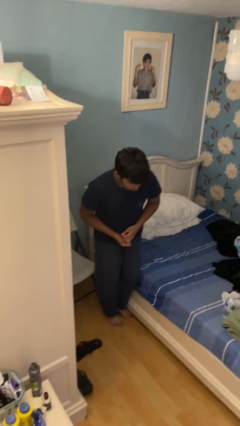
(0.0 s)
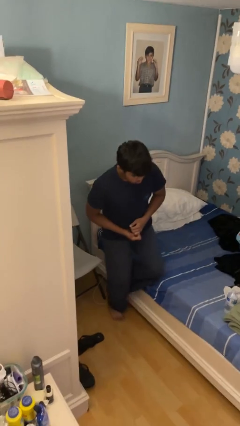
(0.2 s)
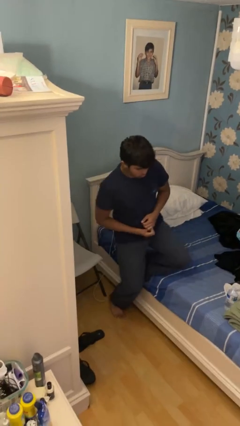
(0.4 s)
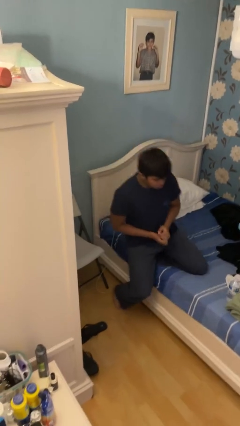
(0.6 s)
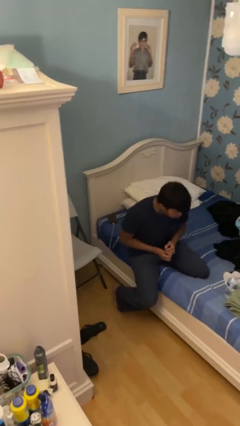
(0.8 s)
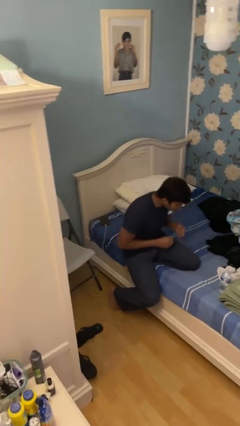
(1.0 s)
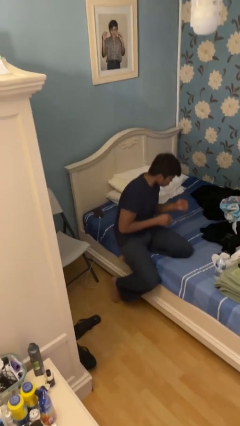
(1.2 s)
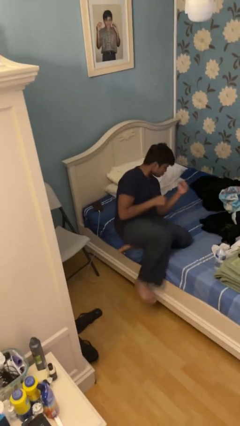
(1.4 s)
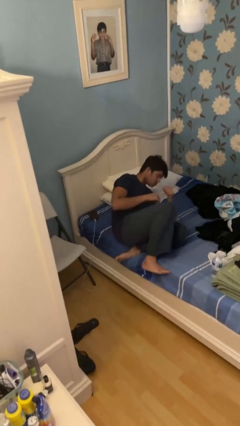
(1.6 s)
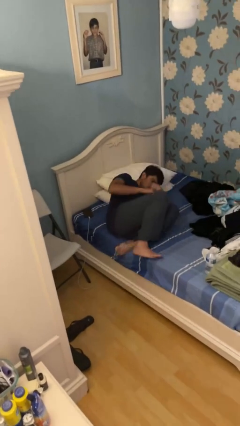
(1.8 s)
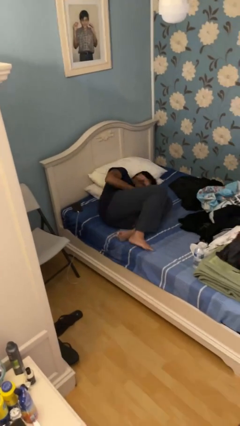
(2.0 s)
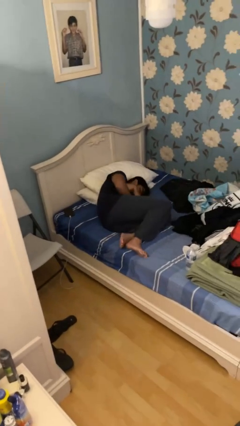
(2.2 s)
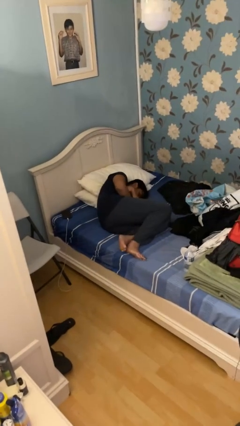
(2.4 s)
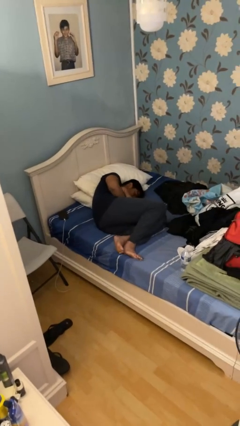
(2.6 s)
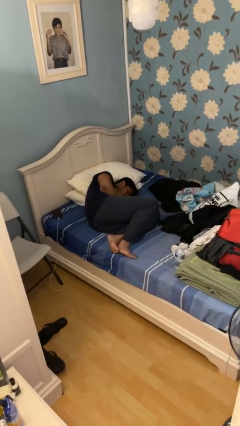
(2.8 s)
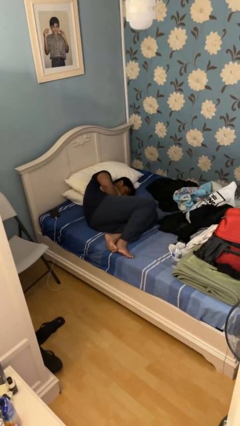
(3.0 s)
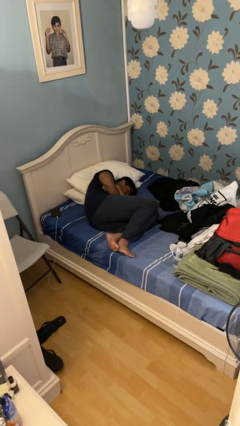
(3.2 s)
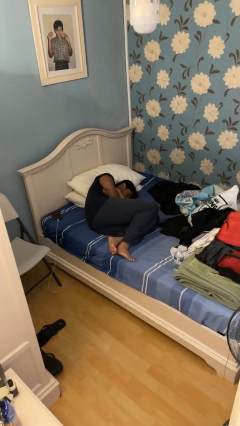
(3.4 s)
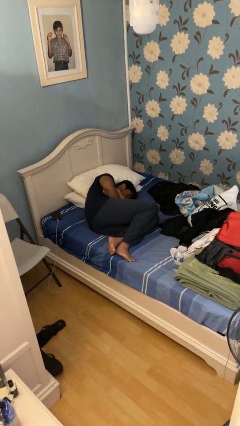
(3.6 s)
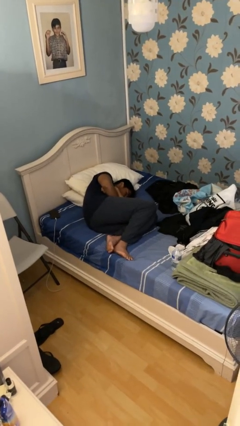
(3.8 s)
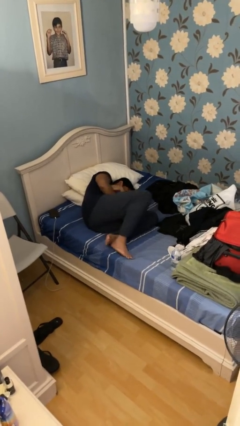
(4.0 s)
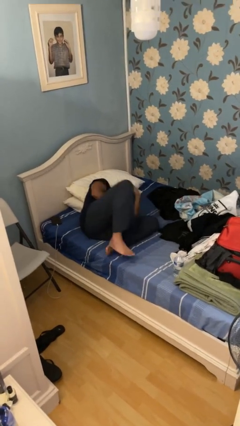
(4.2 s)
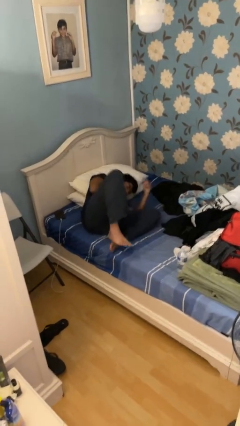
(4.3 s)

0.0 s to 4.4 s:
person lies down on bed

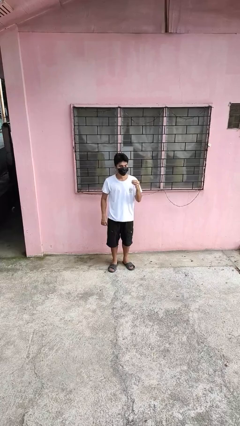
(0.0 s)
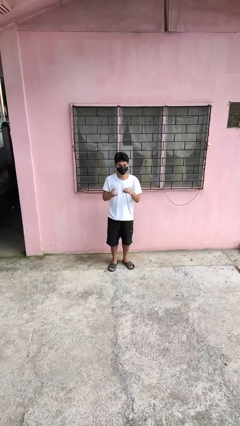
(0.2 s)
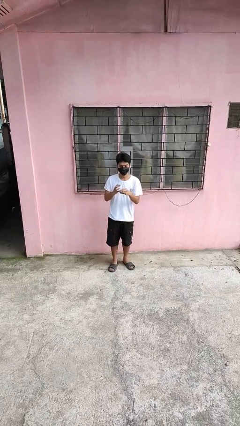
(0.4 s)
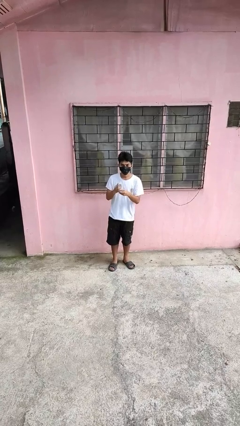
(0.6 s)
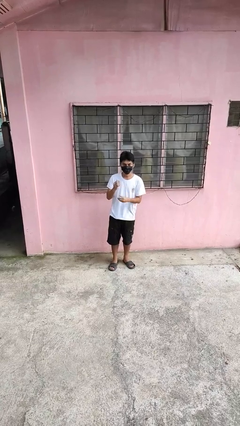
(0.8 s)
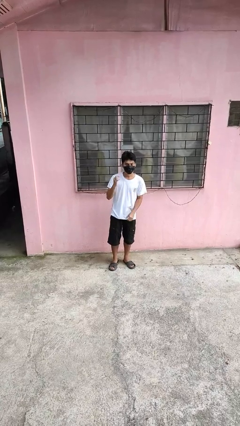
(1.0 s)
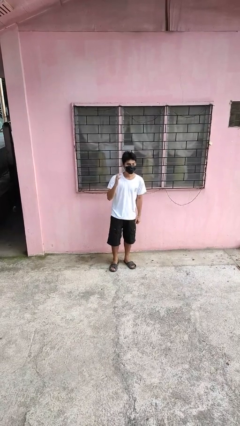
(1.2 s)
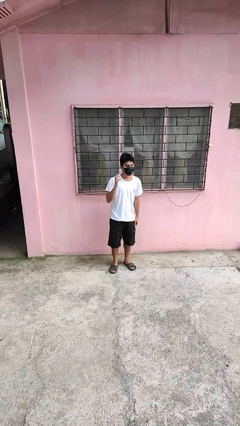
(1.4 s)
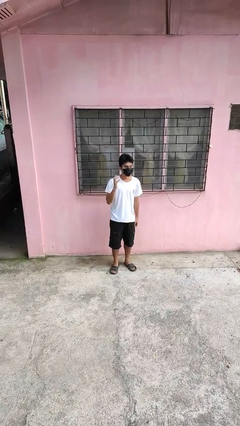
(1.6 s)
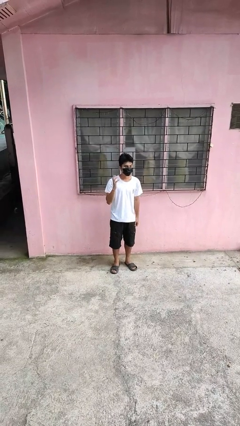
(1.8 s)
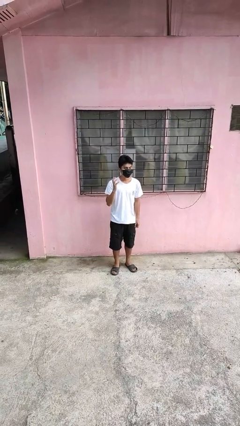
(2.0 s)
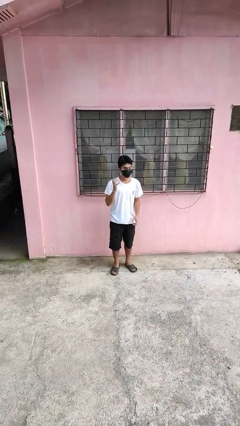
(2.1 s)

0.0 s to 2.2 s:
person puts on ring

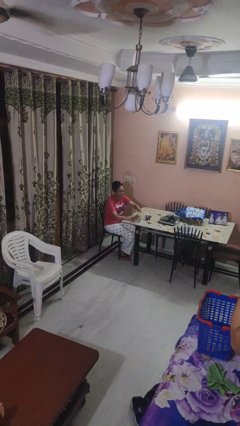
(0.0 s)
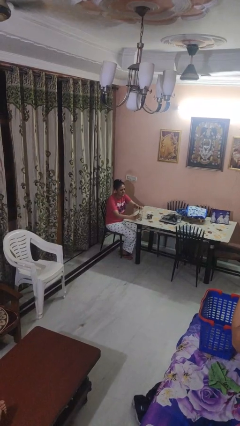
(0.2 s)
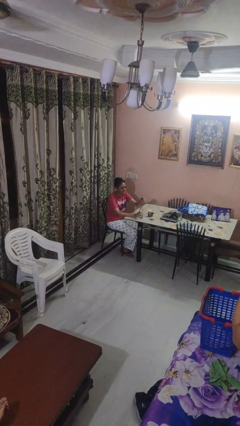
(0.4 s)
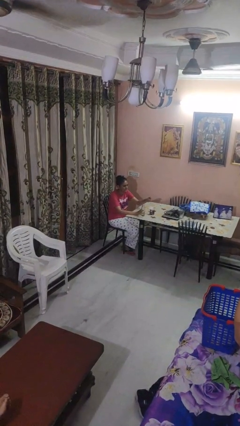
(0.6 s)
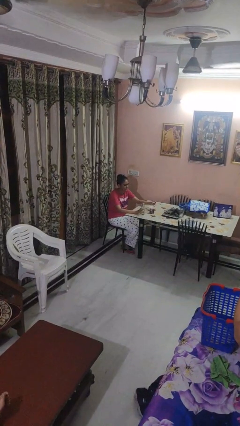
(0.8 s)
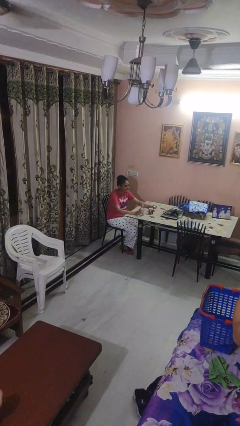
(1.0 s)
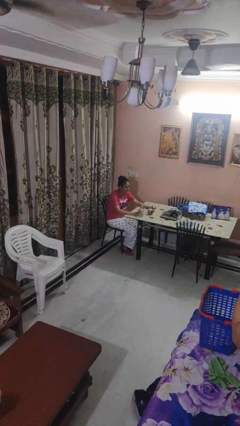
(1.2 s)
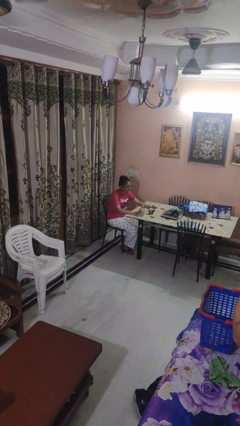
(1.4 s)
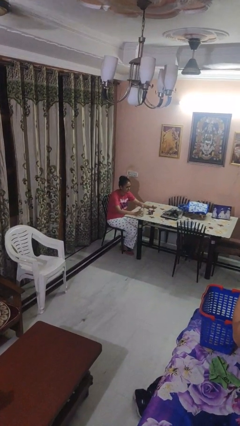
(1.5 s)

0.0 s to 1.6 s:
person unscrews lid from bottle

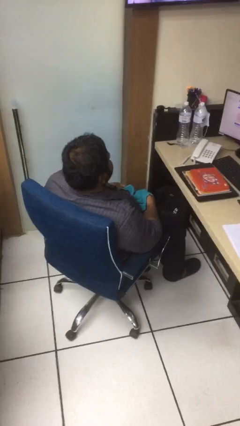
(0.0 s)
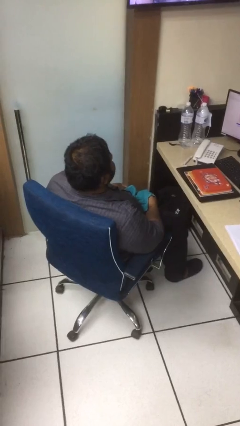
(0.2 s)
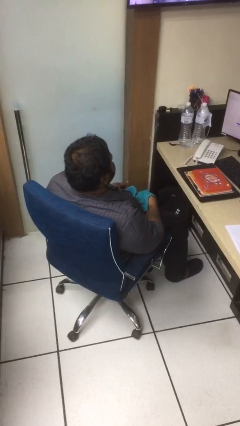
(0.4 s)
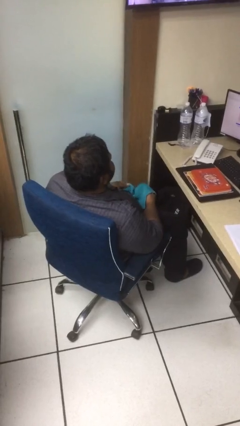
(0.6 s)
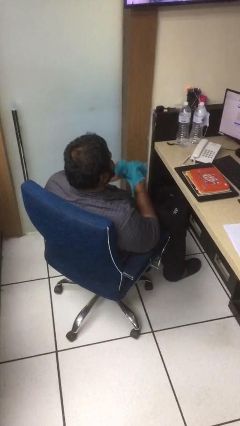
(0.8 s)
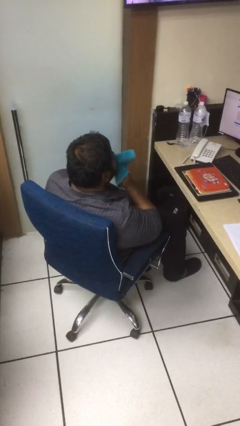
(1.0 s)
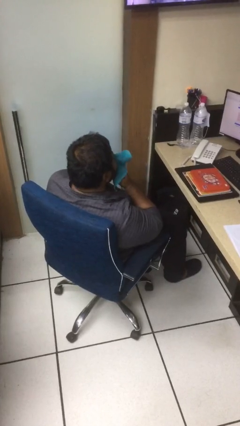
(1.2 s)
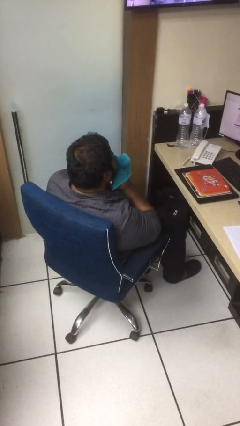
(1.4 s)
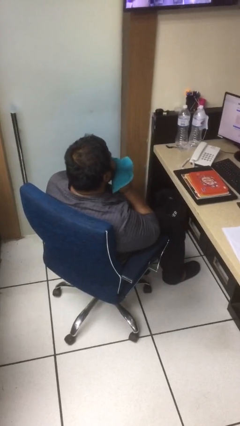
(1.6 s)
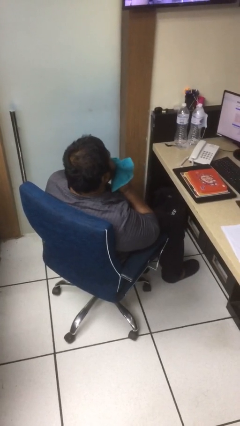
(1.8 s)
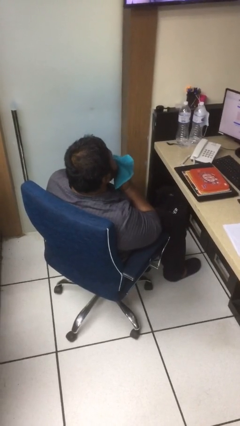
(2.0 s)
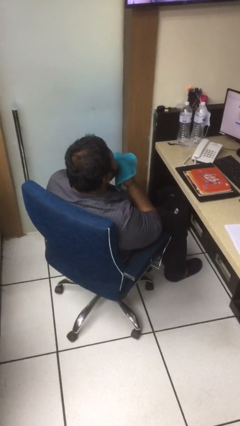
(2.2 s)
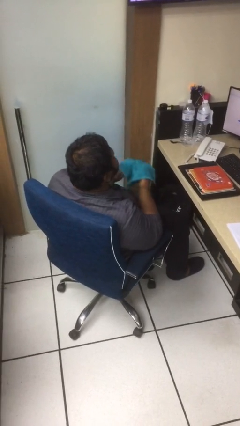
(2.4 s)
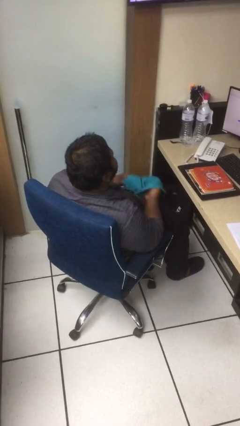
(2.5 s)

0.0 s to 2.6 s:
person wipes mouth with napkin

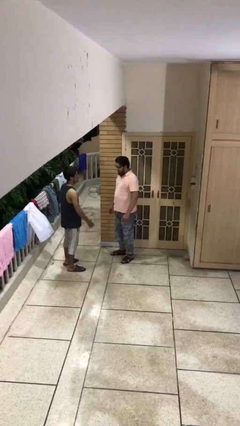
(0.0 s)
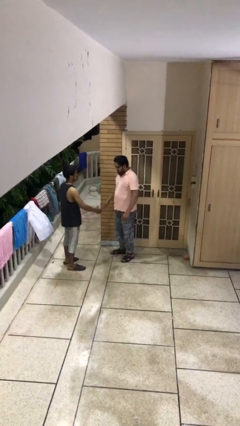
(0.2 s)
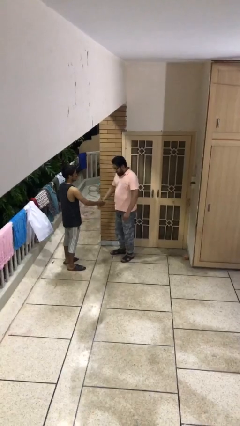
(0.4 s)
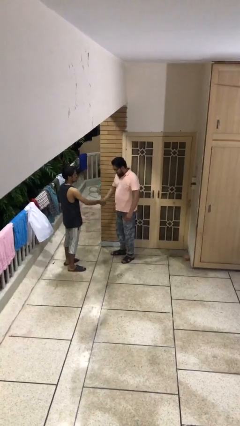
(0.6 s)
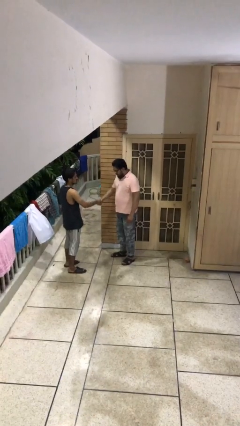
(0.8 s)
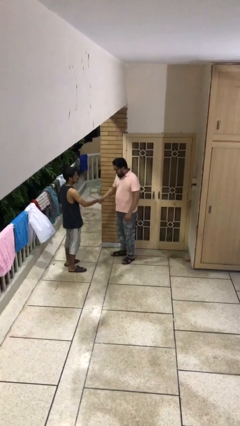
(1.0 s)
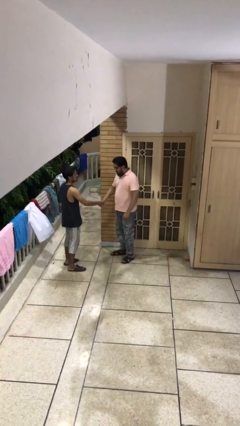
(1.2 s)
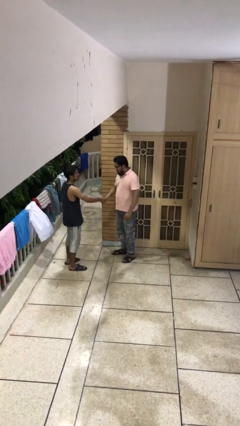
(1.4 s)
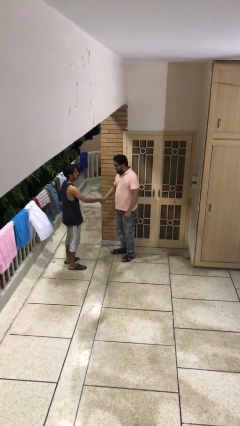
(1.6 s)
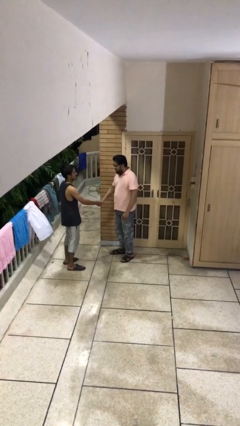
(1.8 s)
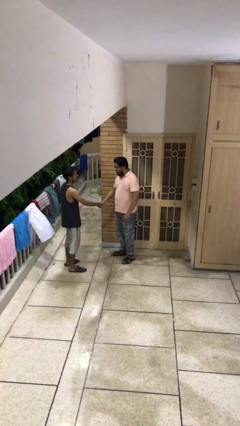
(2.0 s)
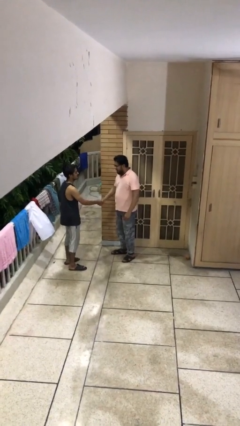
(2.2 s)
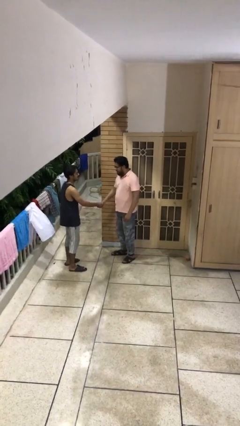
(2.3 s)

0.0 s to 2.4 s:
person shakes hand

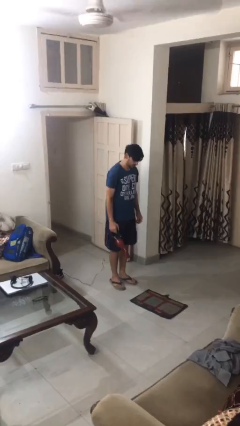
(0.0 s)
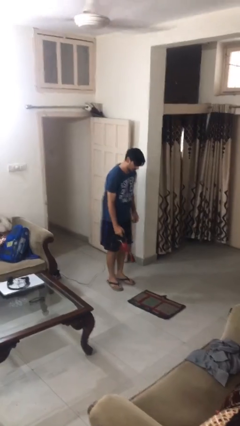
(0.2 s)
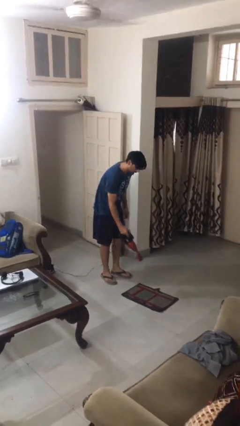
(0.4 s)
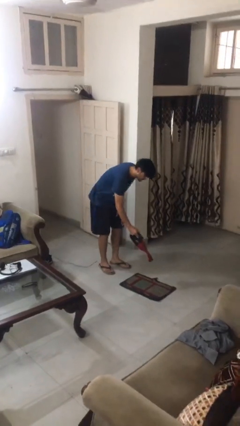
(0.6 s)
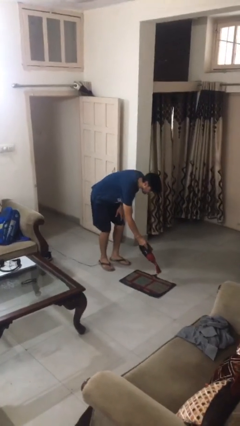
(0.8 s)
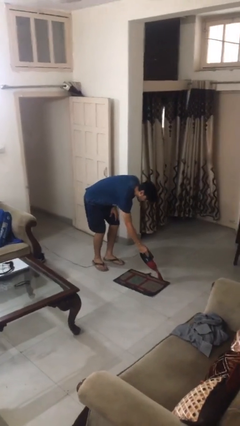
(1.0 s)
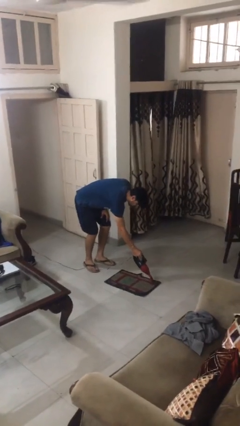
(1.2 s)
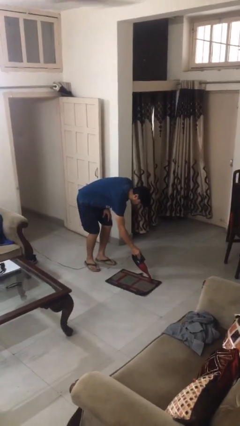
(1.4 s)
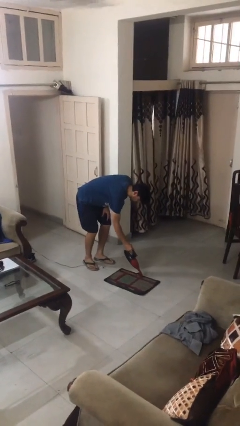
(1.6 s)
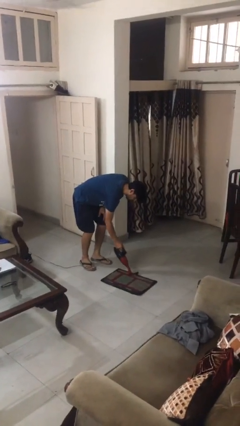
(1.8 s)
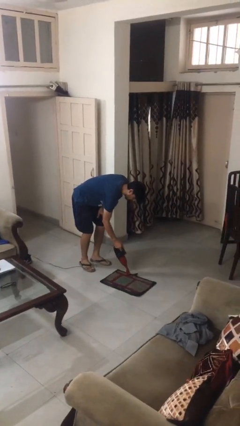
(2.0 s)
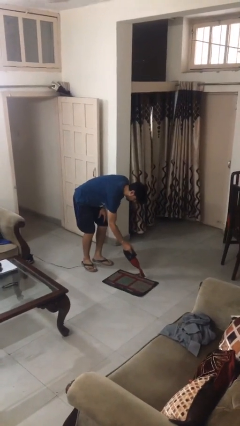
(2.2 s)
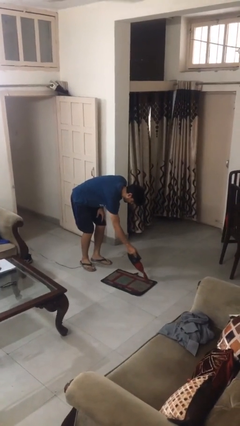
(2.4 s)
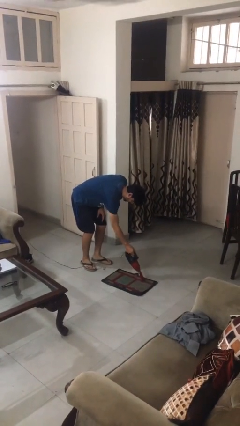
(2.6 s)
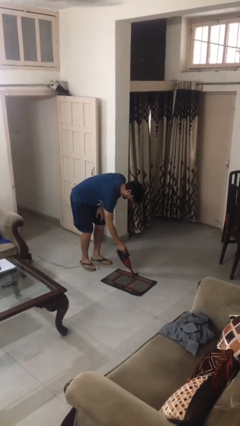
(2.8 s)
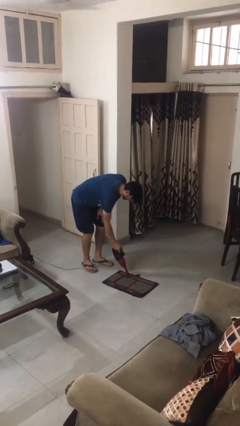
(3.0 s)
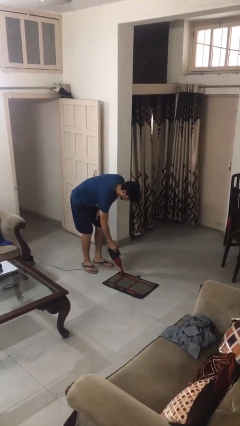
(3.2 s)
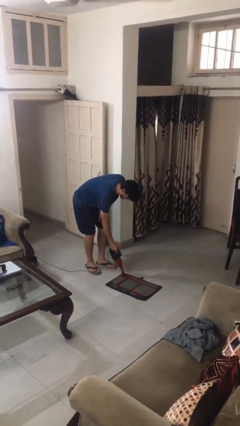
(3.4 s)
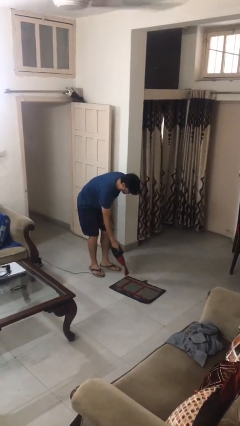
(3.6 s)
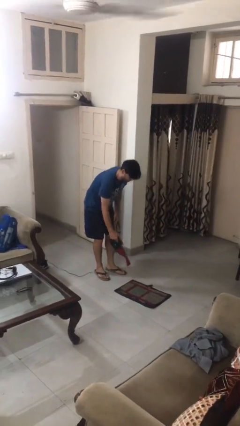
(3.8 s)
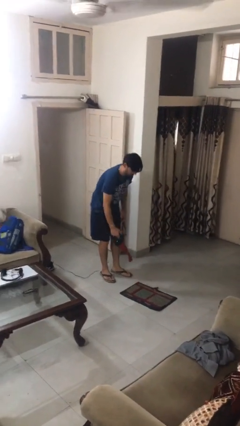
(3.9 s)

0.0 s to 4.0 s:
person vacuums carpet

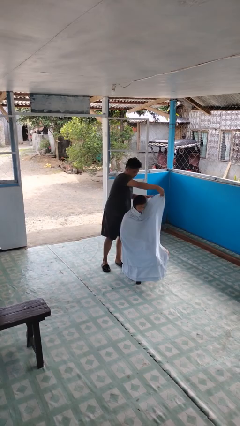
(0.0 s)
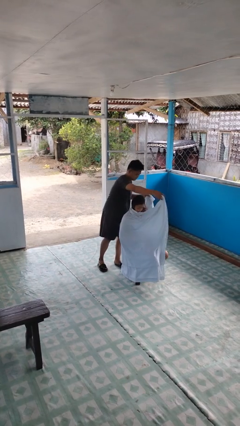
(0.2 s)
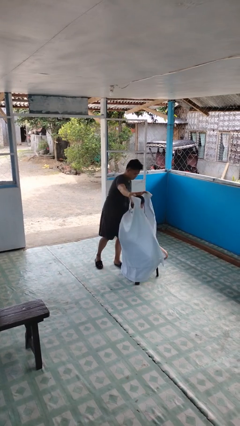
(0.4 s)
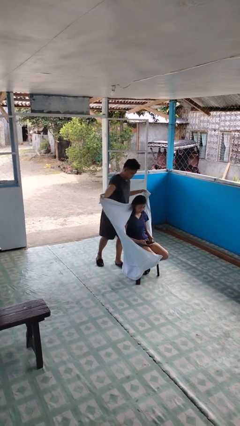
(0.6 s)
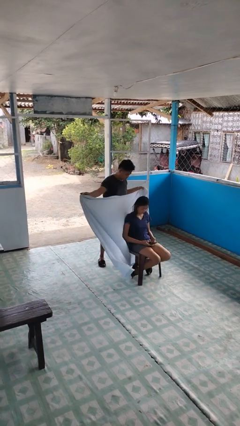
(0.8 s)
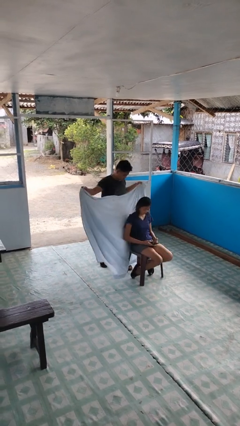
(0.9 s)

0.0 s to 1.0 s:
person uncovers friend with blanket
